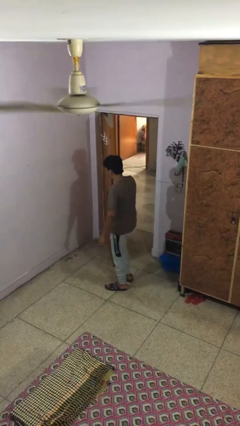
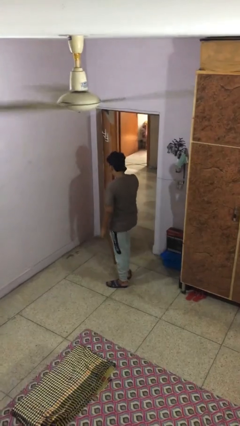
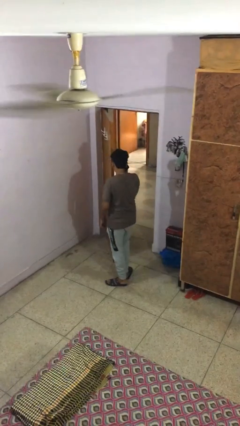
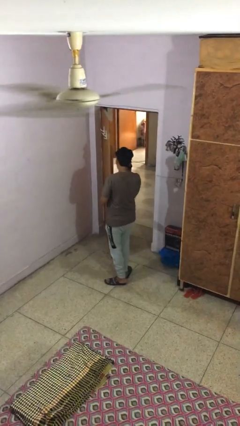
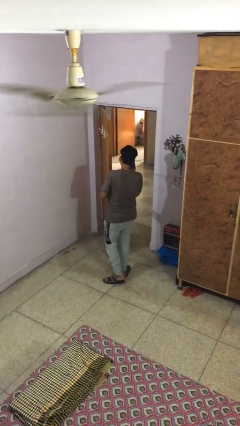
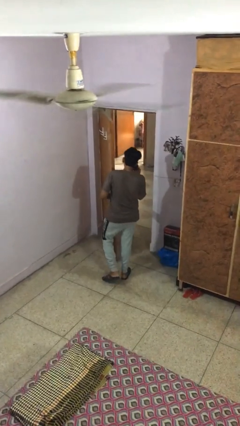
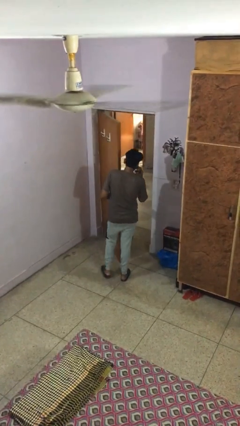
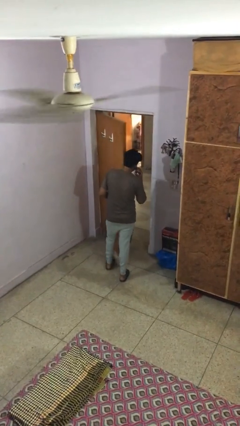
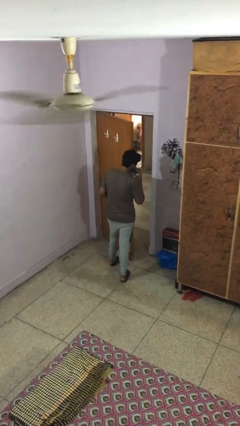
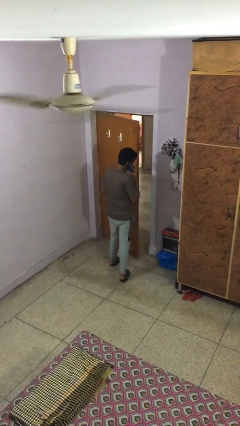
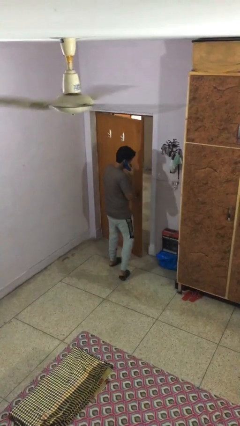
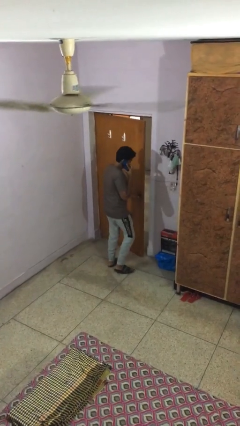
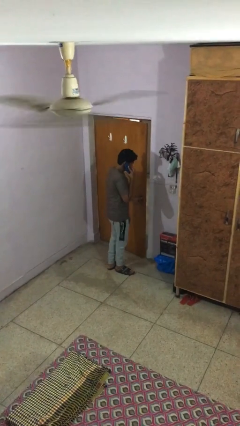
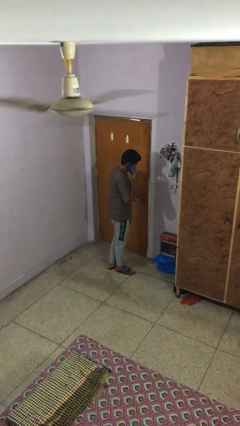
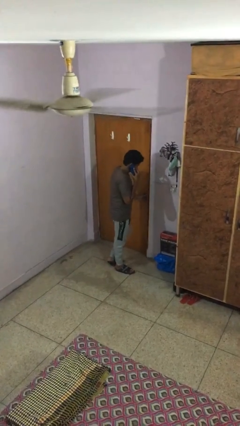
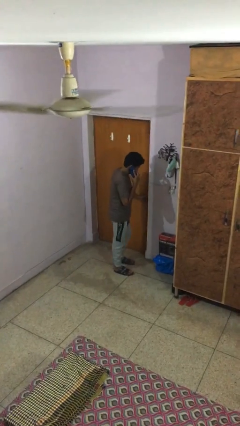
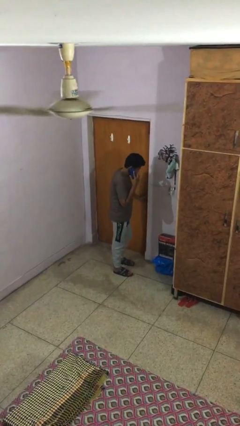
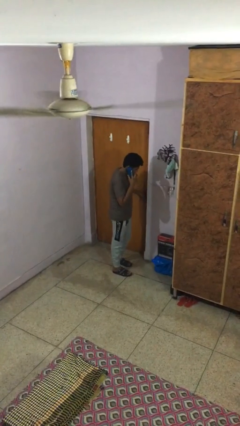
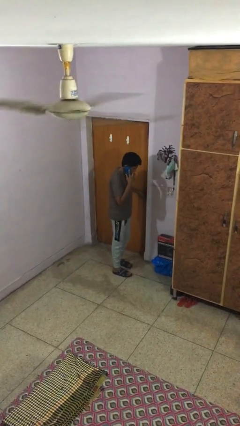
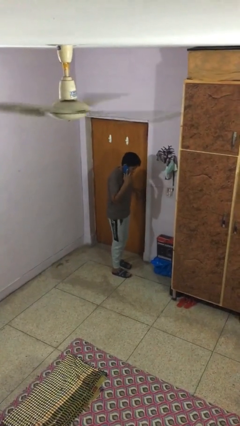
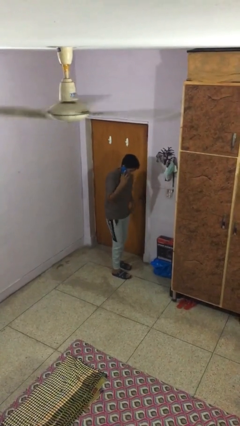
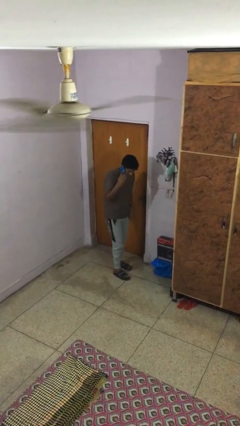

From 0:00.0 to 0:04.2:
person closes facility door

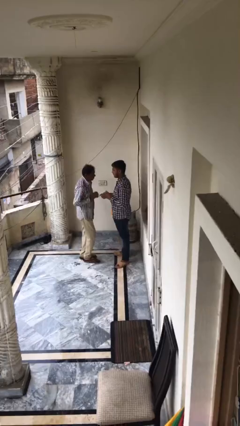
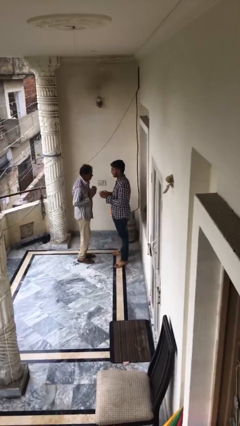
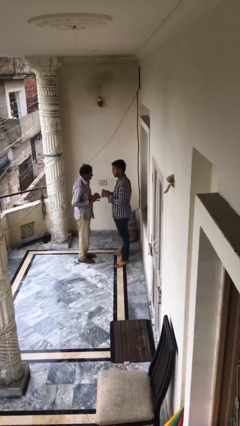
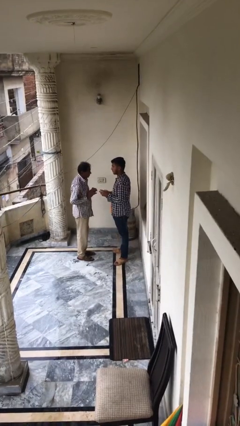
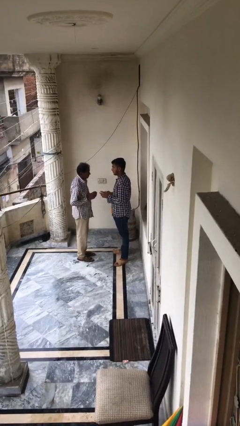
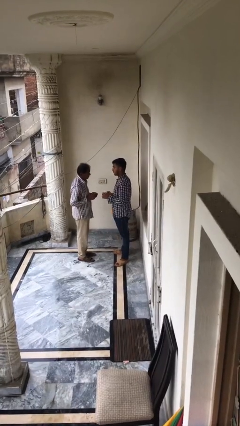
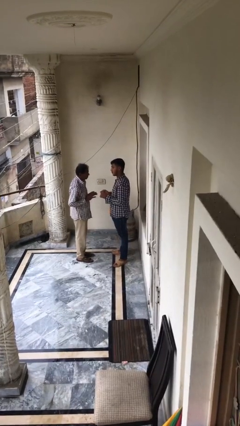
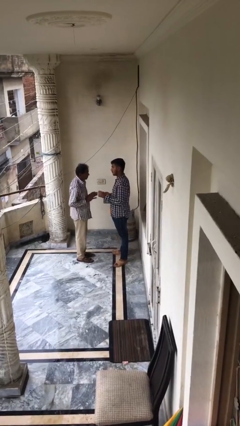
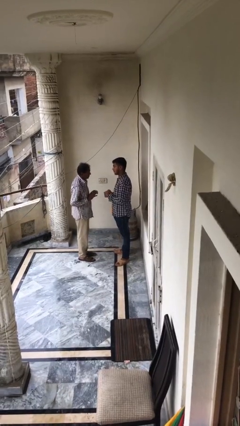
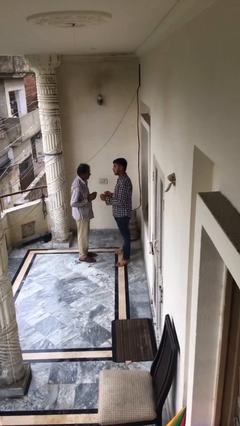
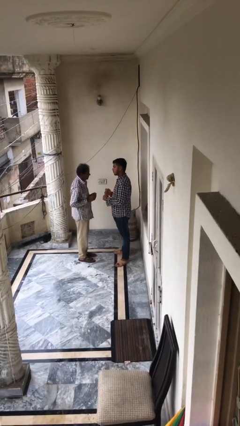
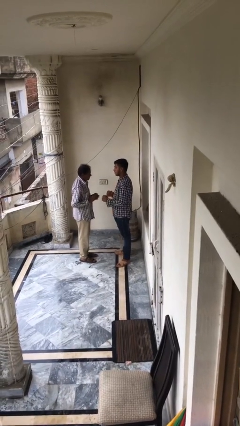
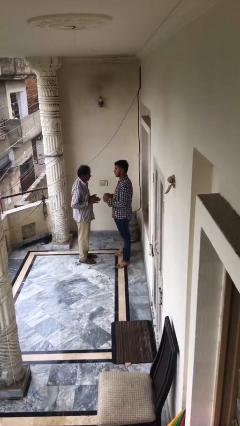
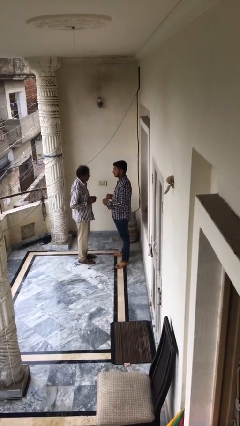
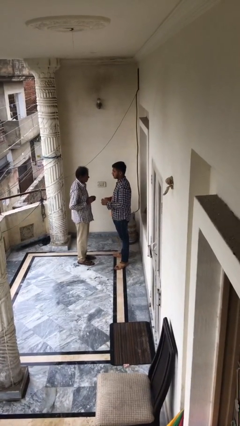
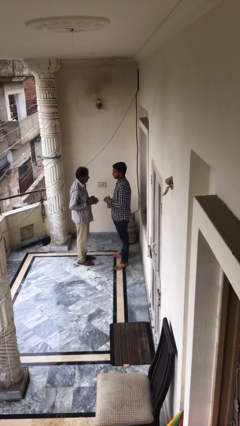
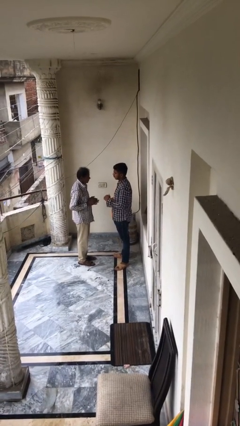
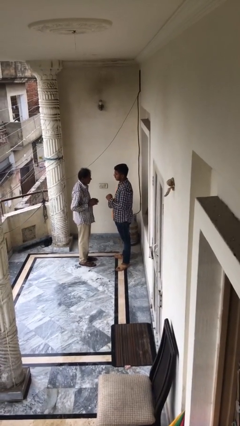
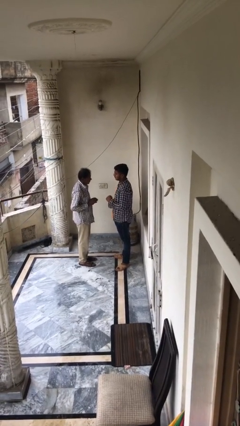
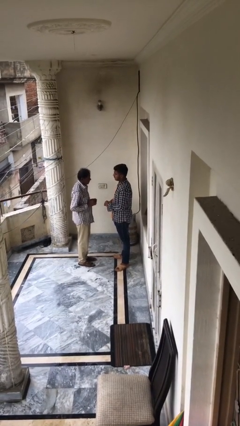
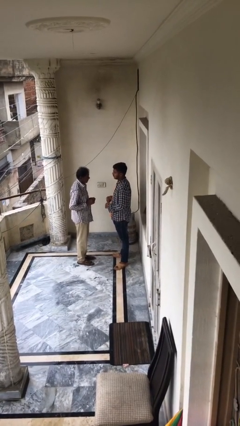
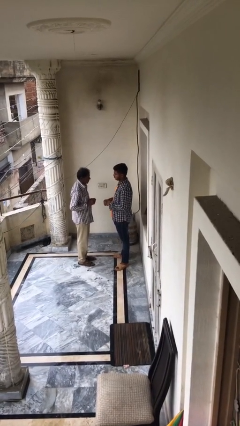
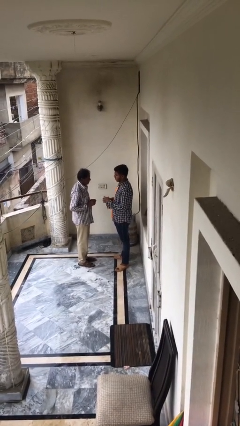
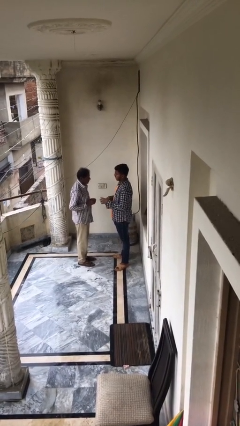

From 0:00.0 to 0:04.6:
person talks to person

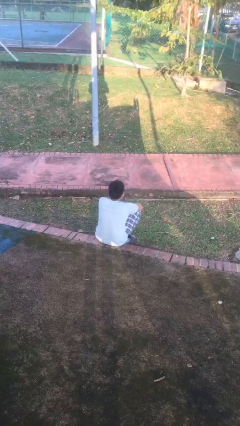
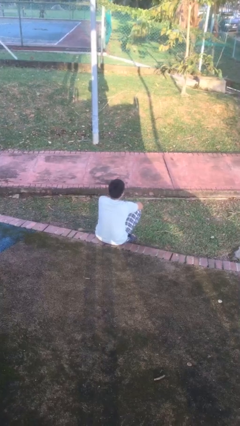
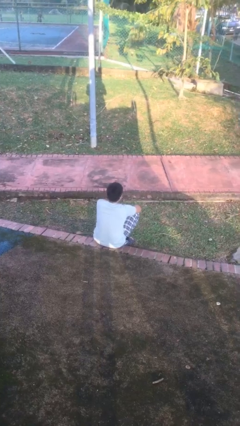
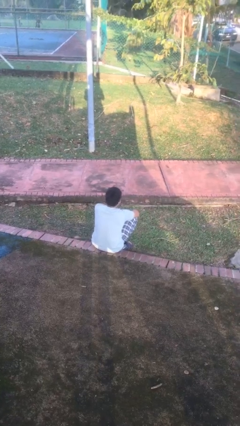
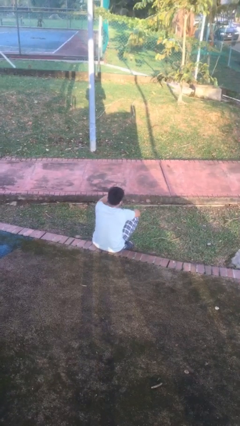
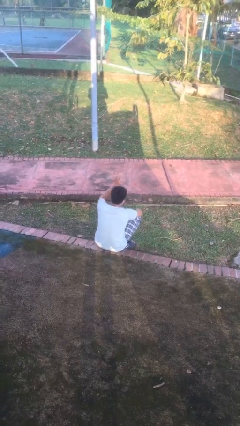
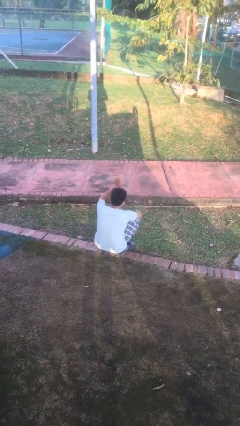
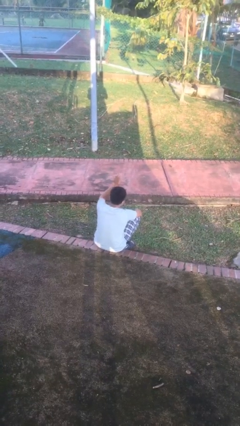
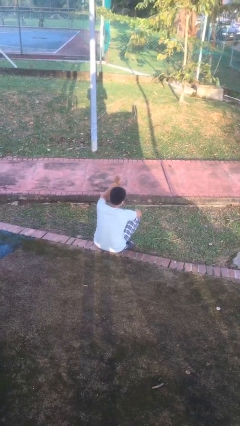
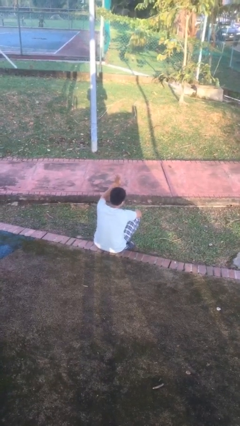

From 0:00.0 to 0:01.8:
person gestures stop

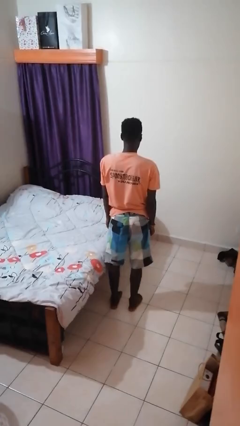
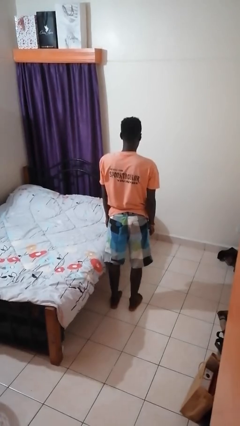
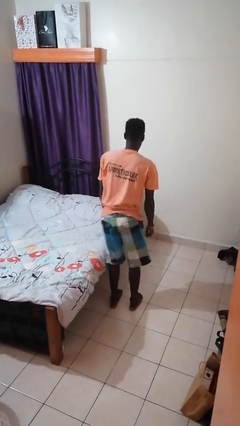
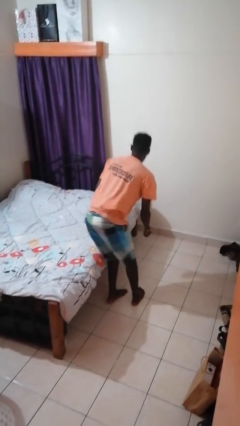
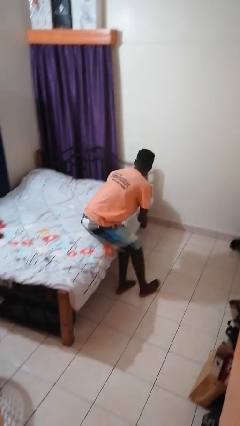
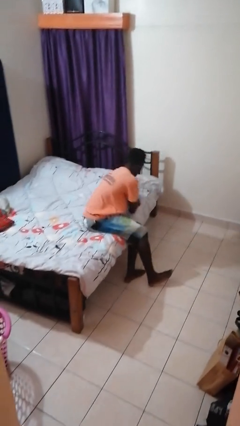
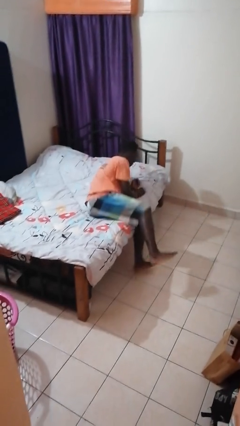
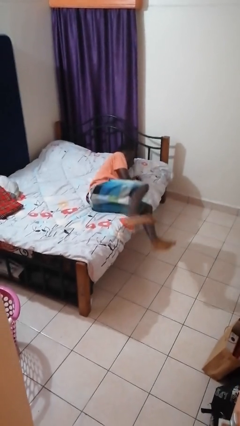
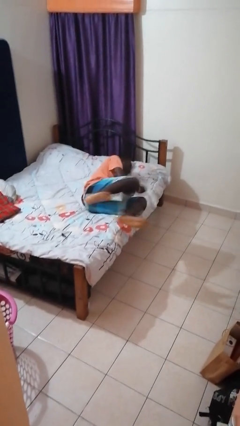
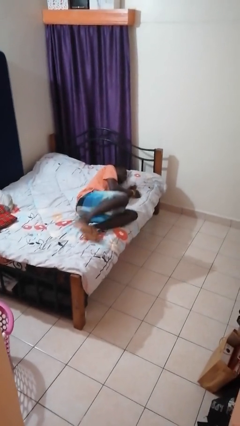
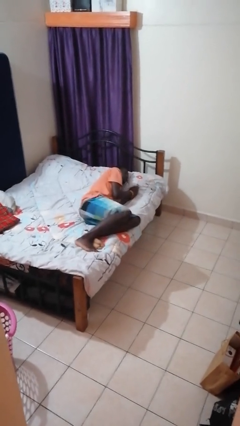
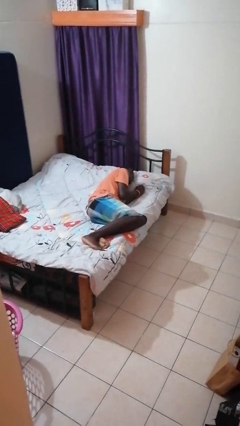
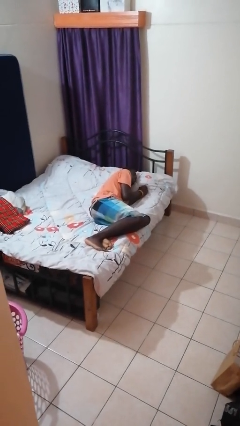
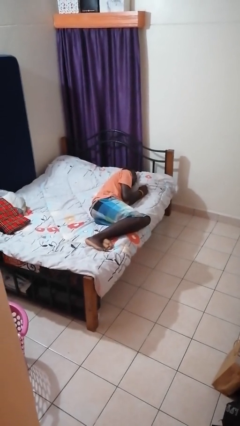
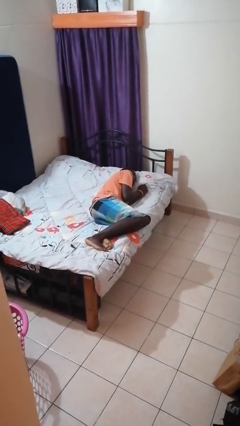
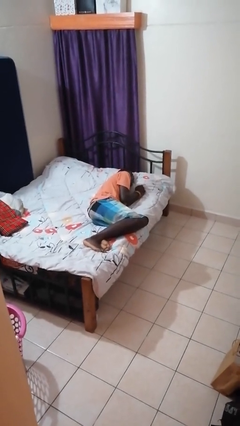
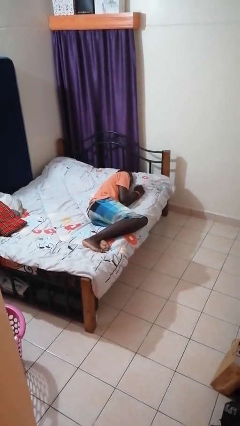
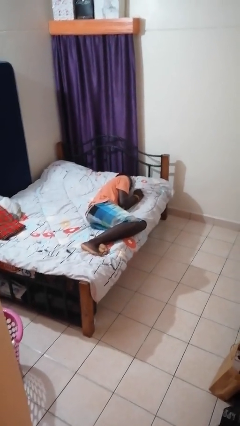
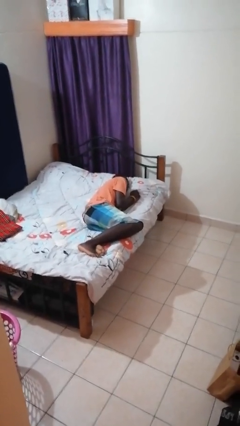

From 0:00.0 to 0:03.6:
person lies down on bed

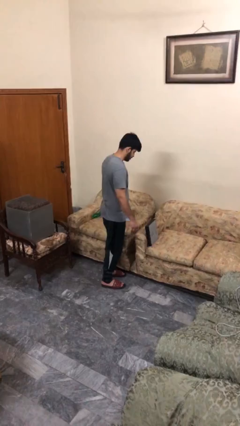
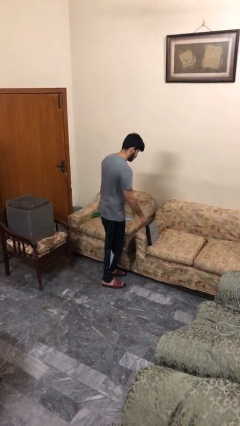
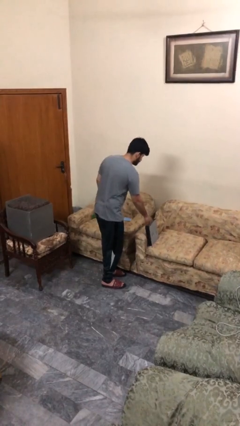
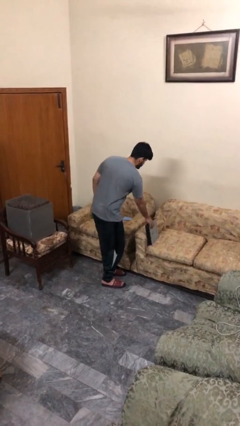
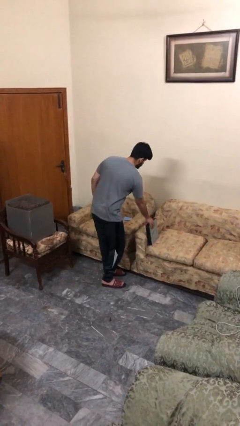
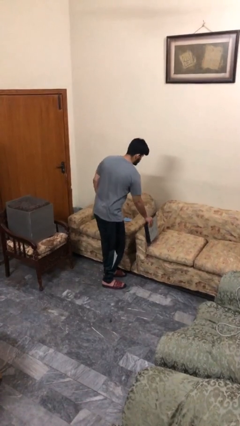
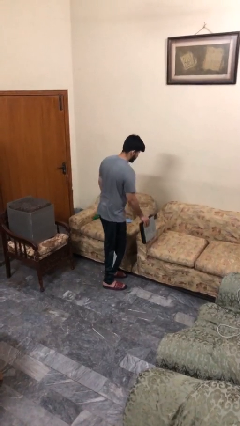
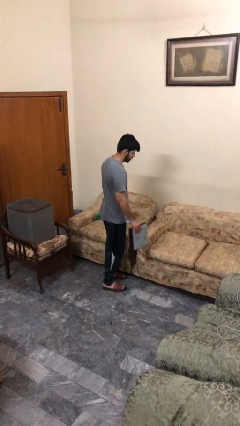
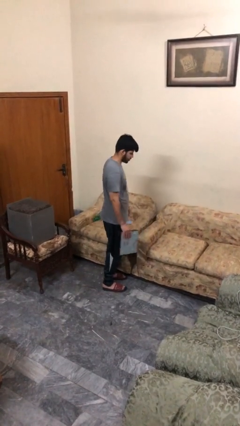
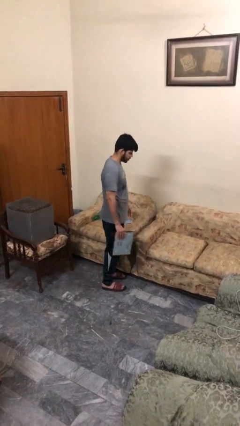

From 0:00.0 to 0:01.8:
person picks up object from couch

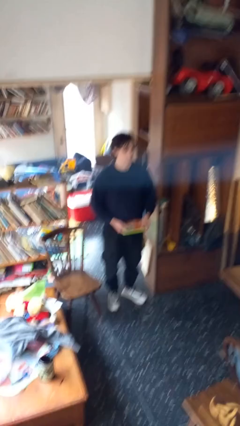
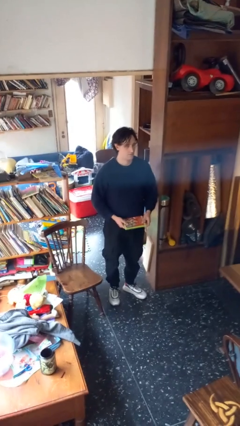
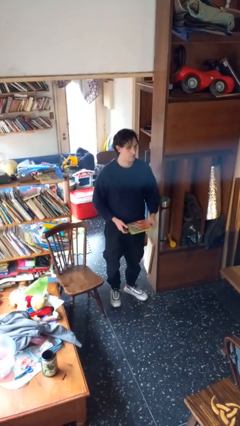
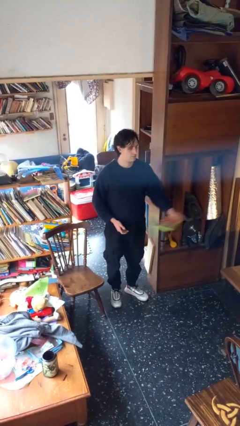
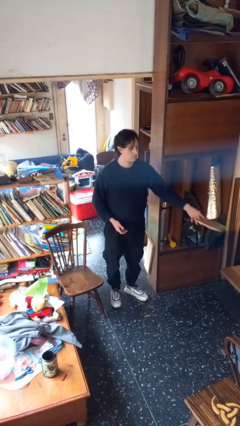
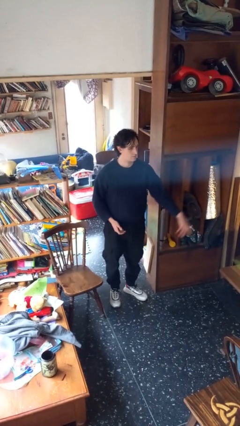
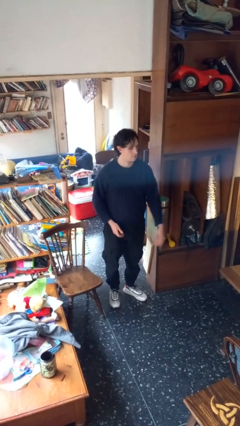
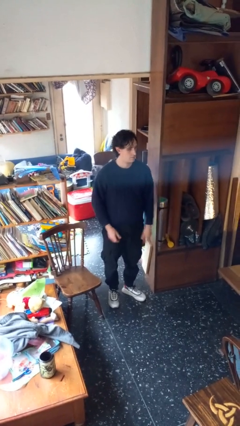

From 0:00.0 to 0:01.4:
person throws object on table
